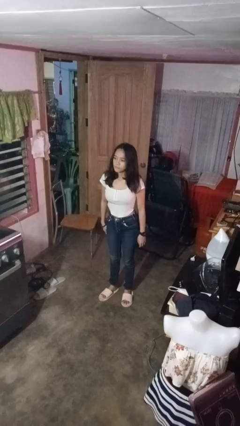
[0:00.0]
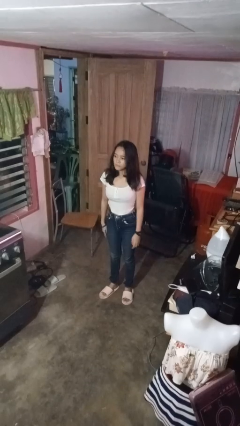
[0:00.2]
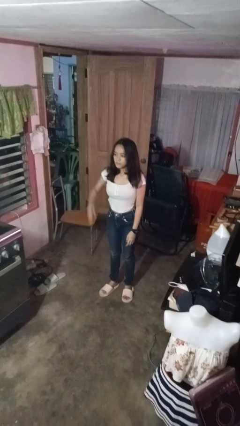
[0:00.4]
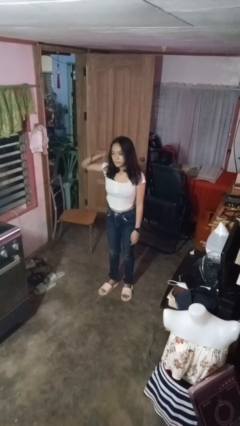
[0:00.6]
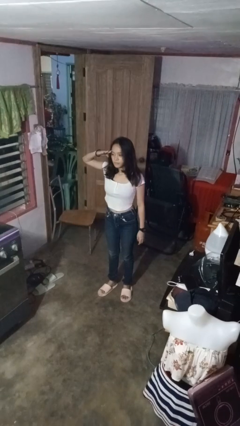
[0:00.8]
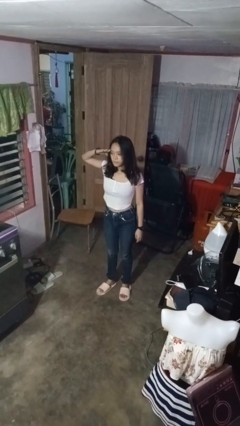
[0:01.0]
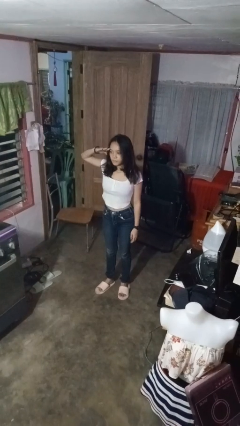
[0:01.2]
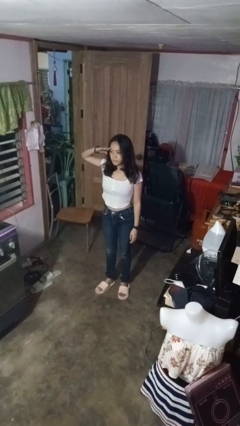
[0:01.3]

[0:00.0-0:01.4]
person salutes

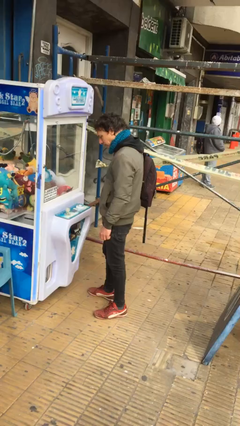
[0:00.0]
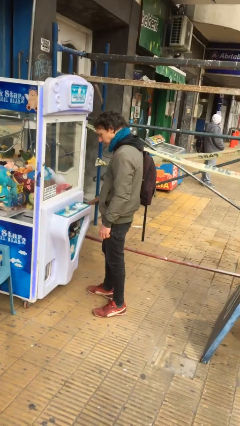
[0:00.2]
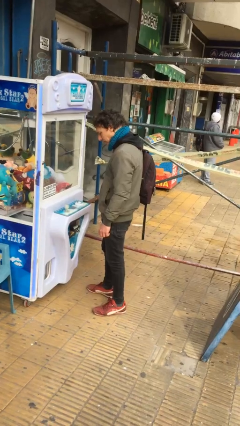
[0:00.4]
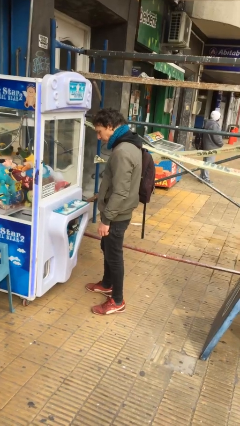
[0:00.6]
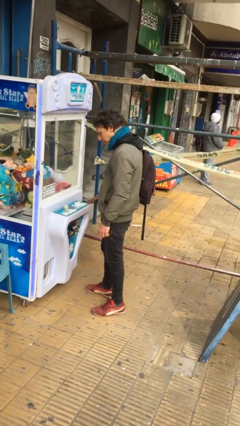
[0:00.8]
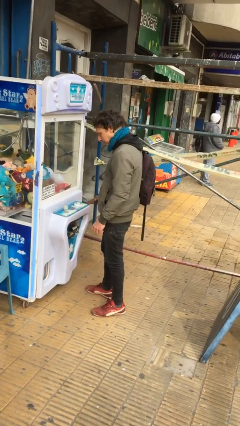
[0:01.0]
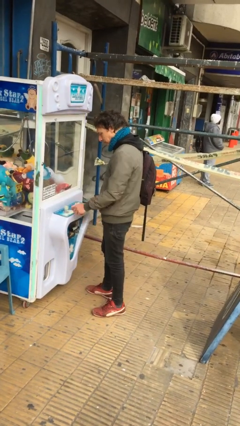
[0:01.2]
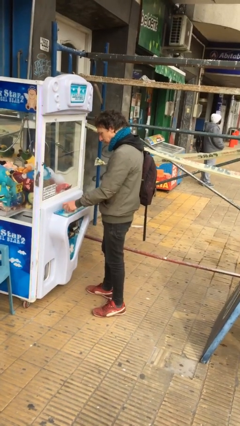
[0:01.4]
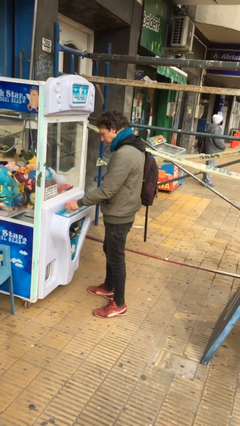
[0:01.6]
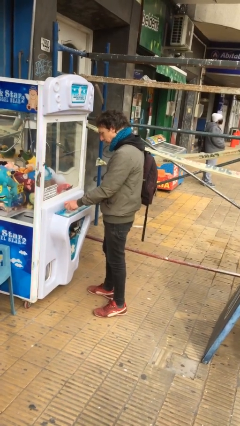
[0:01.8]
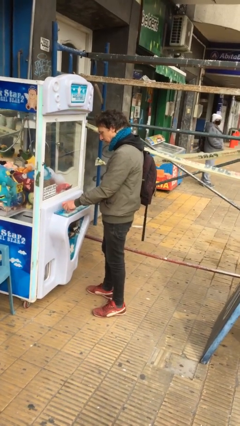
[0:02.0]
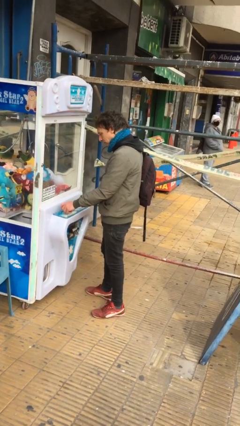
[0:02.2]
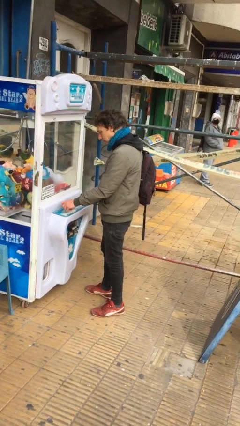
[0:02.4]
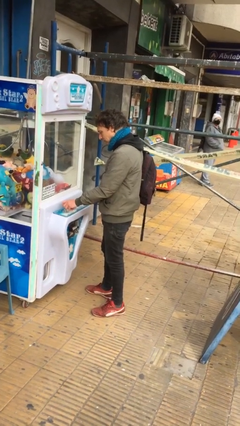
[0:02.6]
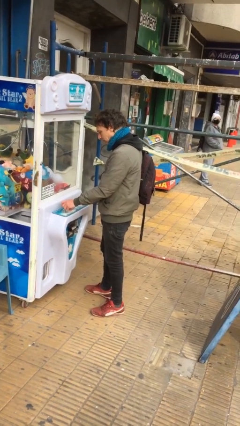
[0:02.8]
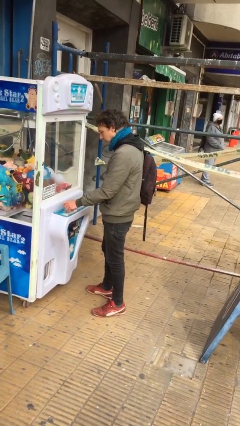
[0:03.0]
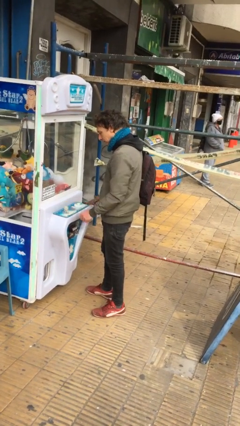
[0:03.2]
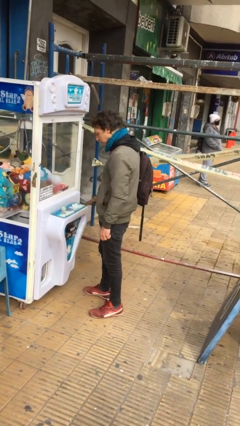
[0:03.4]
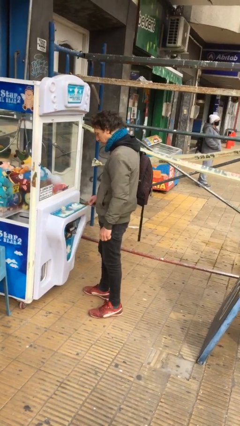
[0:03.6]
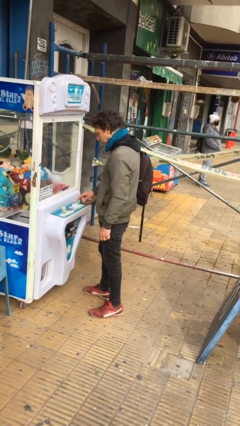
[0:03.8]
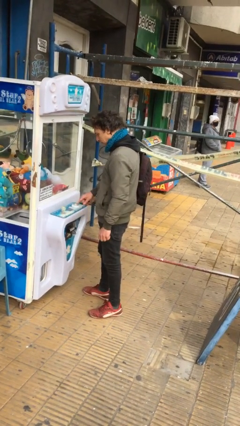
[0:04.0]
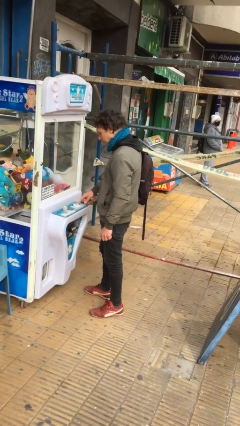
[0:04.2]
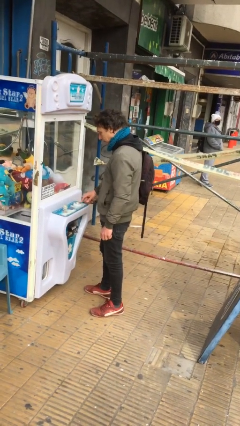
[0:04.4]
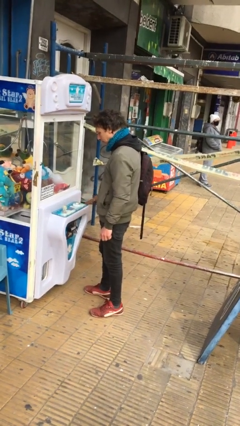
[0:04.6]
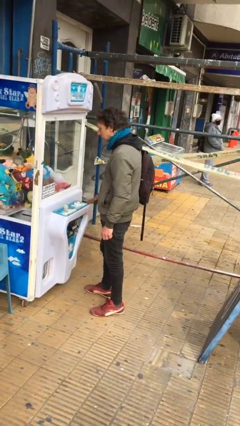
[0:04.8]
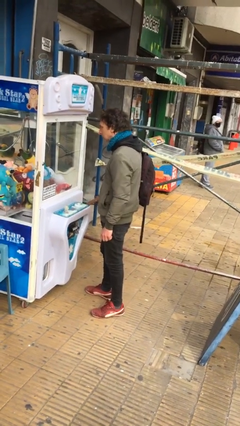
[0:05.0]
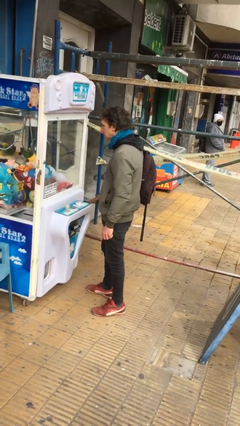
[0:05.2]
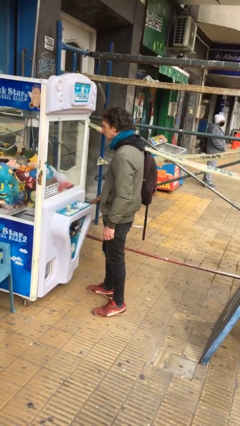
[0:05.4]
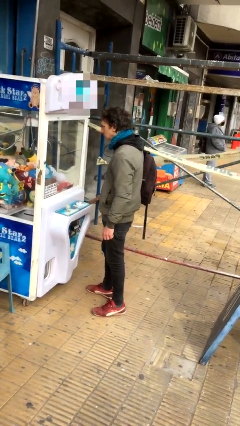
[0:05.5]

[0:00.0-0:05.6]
person purchases from machine

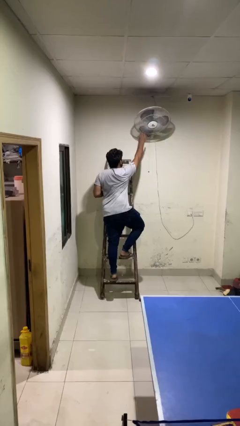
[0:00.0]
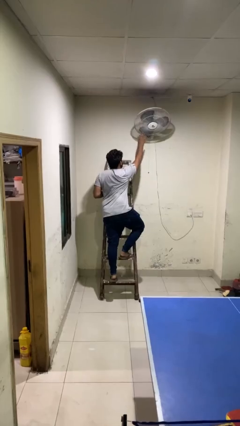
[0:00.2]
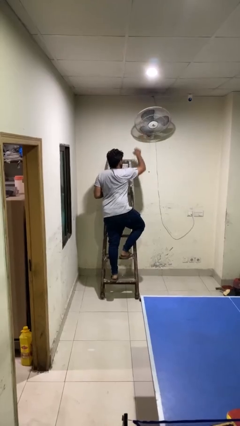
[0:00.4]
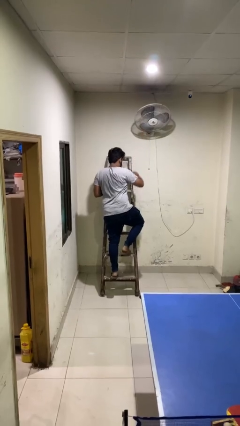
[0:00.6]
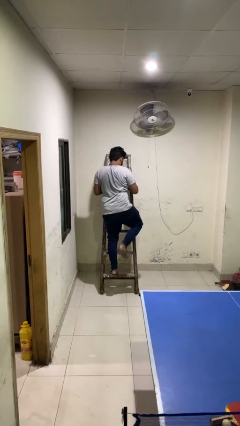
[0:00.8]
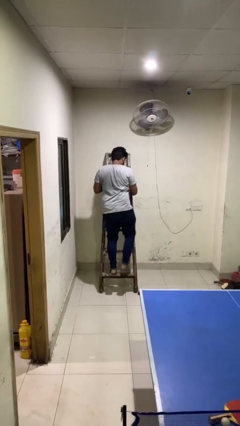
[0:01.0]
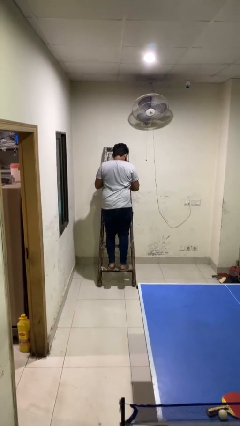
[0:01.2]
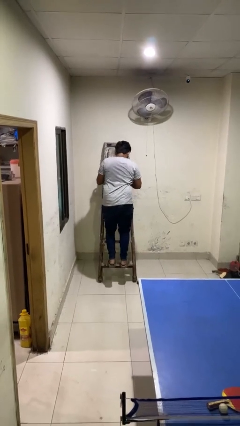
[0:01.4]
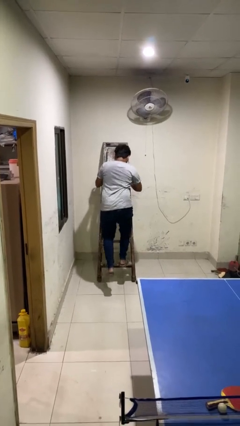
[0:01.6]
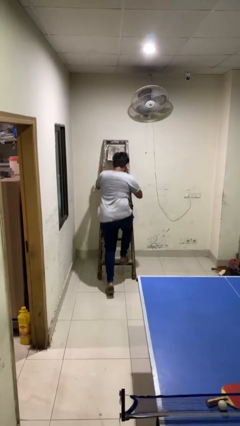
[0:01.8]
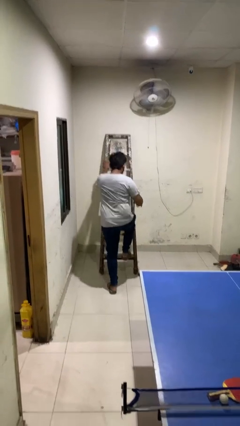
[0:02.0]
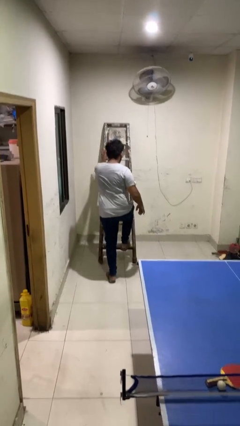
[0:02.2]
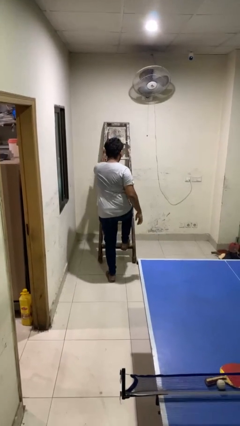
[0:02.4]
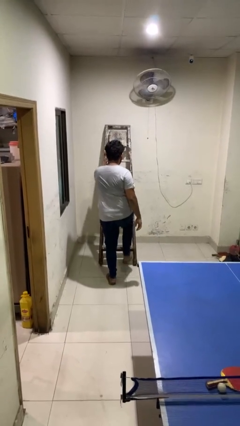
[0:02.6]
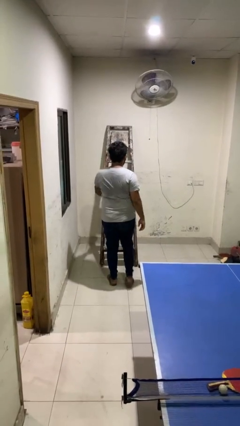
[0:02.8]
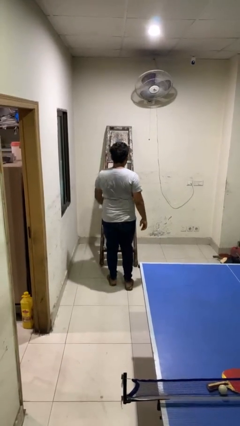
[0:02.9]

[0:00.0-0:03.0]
person climbs down ladder

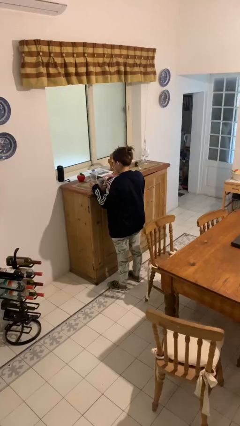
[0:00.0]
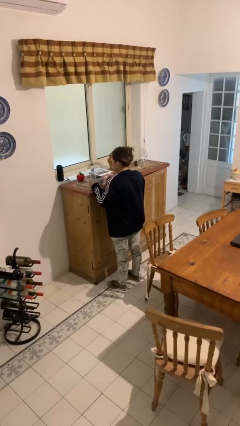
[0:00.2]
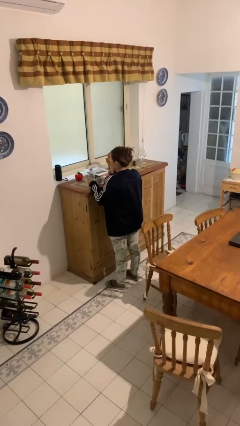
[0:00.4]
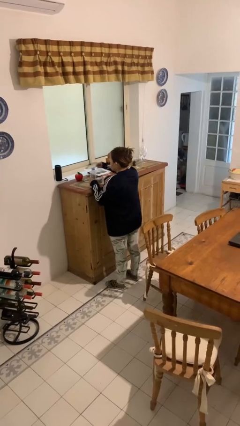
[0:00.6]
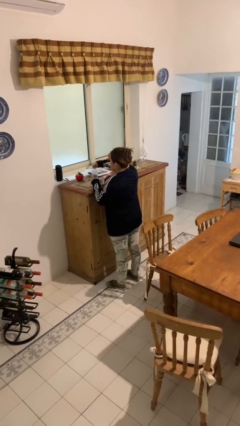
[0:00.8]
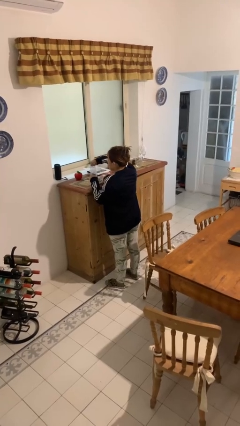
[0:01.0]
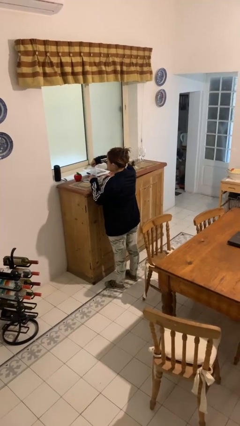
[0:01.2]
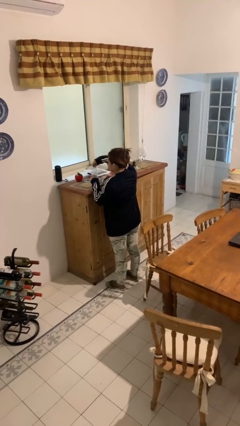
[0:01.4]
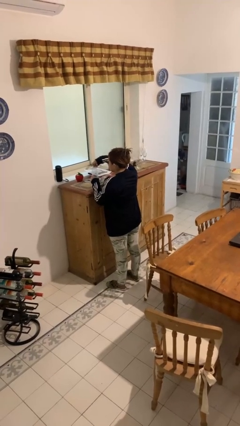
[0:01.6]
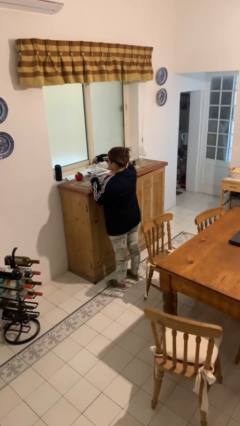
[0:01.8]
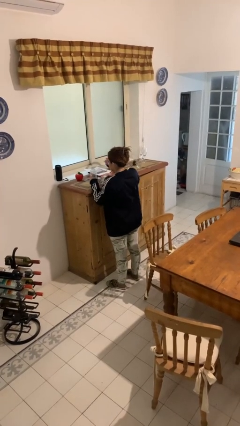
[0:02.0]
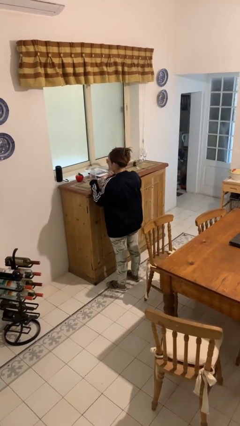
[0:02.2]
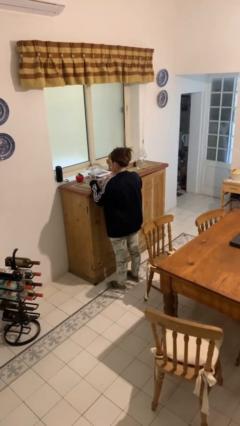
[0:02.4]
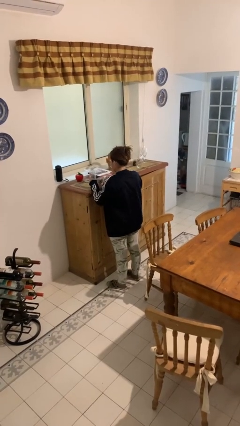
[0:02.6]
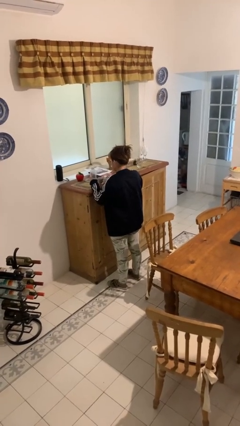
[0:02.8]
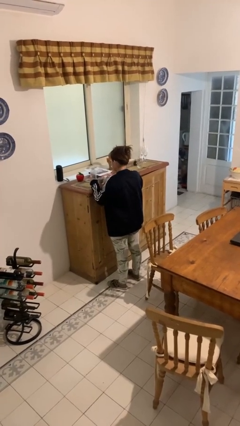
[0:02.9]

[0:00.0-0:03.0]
person unscrews lid from bottle

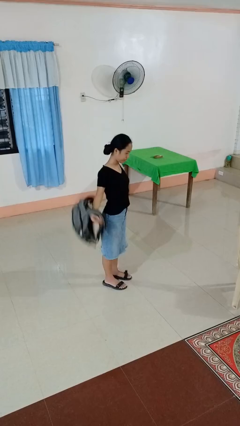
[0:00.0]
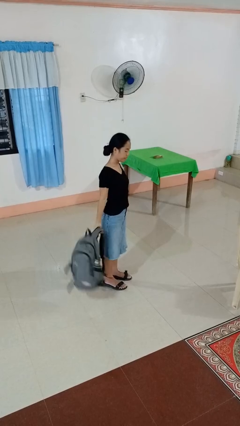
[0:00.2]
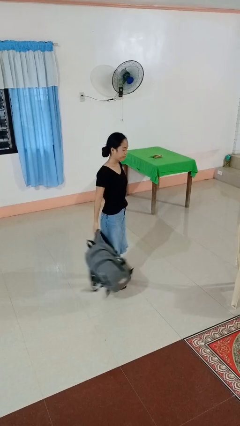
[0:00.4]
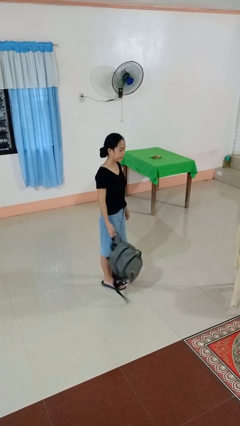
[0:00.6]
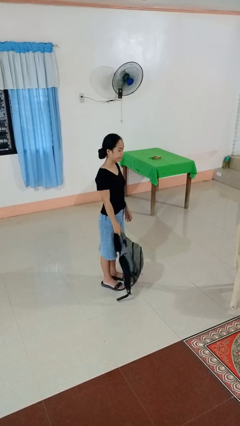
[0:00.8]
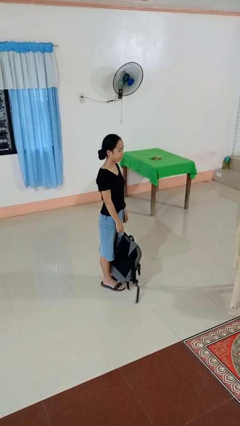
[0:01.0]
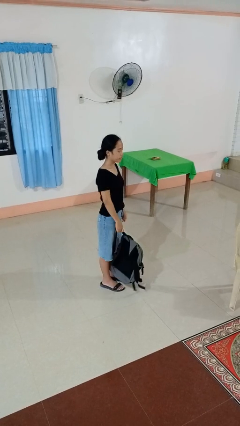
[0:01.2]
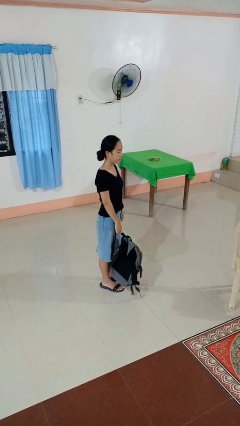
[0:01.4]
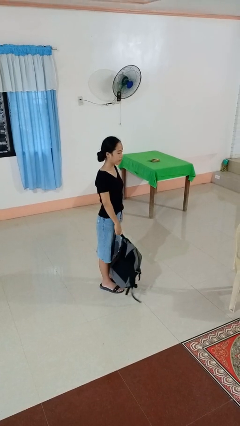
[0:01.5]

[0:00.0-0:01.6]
person takes off backpack

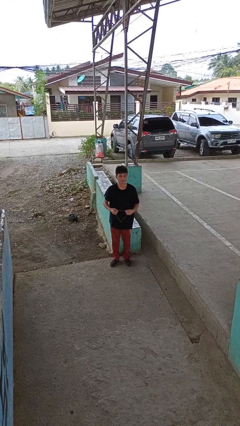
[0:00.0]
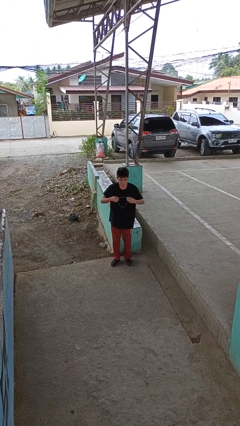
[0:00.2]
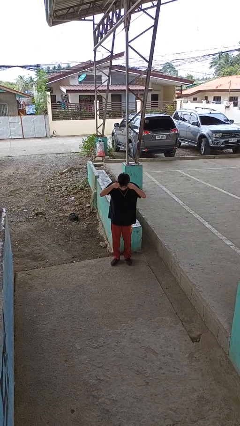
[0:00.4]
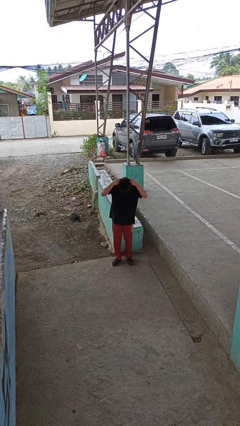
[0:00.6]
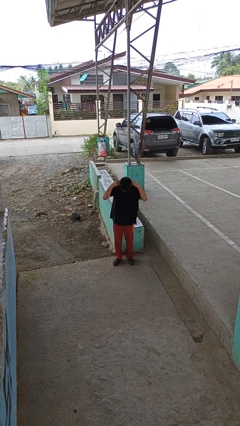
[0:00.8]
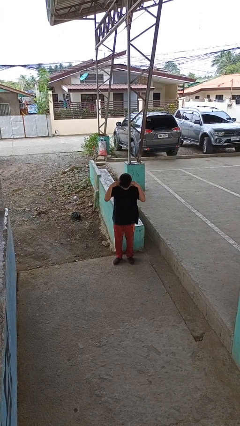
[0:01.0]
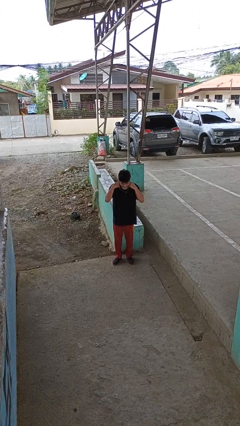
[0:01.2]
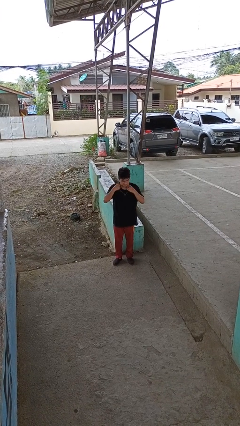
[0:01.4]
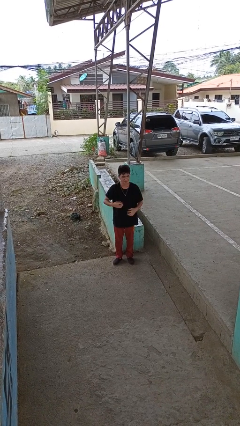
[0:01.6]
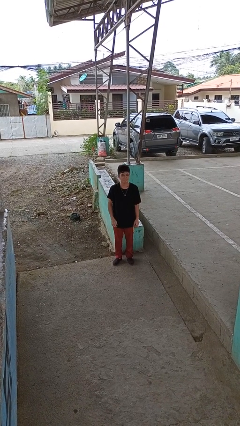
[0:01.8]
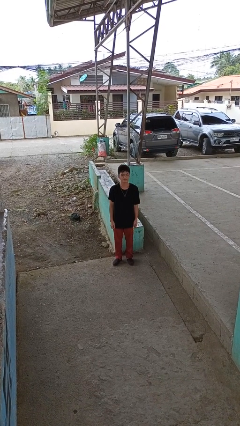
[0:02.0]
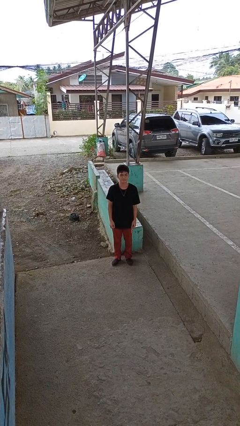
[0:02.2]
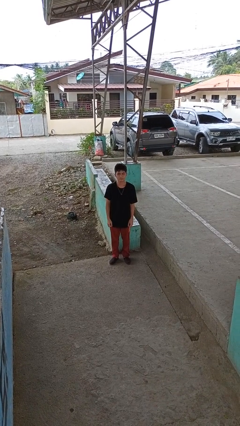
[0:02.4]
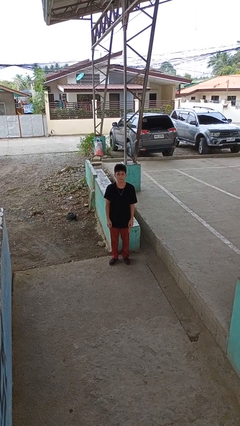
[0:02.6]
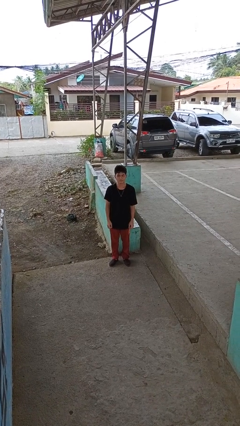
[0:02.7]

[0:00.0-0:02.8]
person puts on necklace
